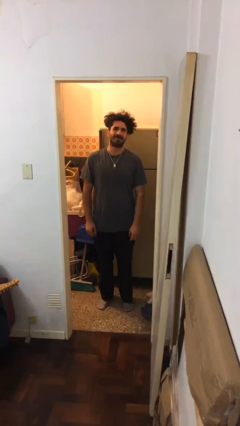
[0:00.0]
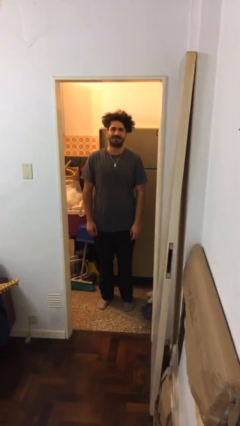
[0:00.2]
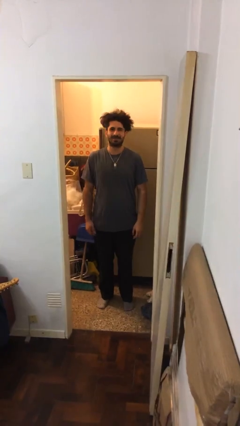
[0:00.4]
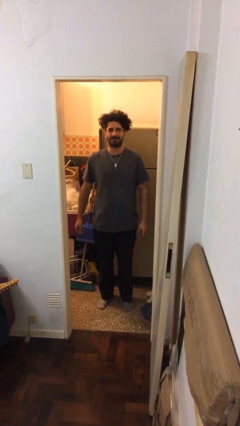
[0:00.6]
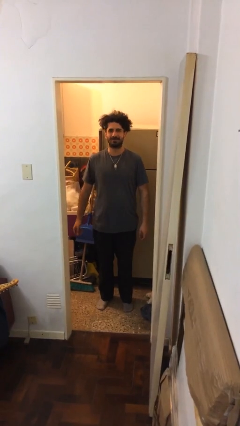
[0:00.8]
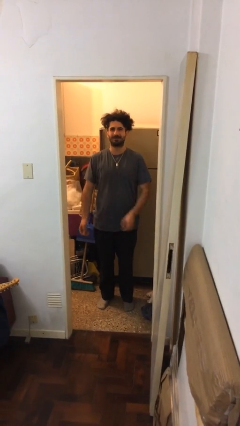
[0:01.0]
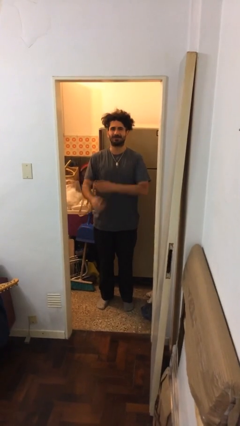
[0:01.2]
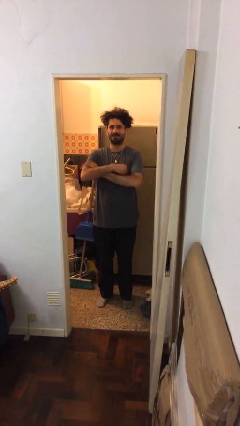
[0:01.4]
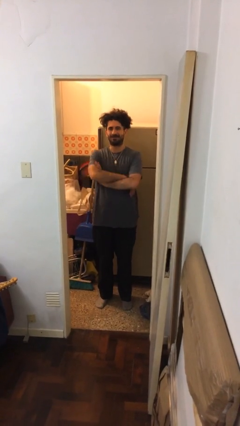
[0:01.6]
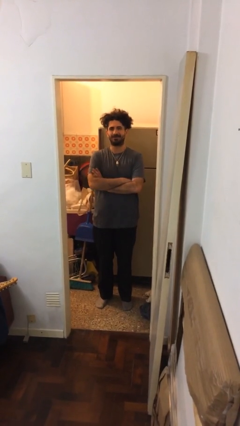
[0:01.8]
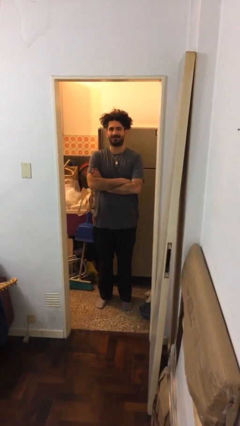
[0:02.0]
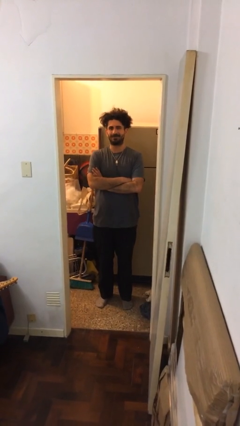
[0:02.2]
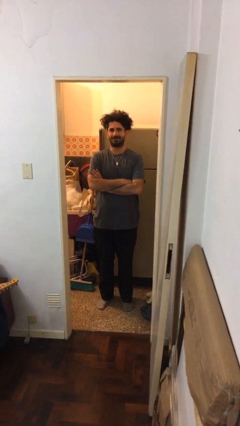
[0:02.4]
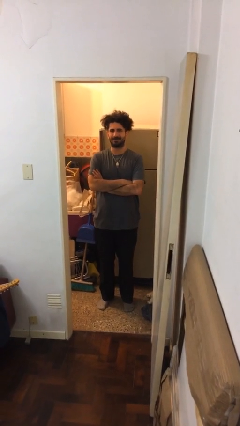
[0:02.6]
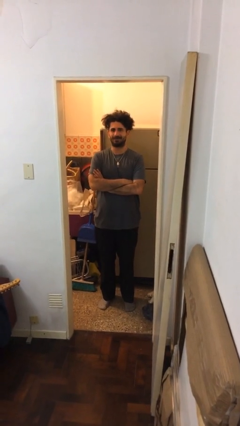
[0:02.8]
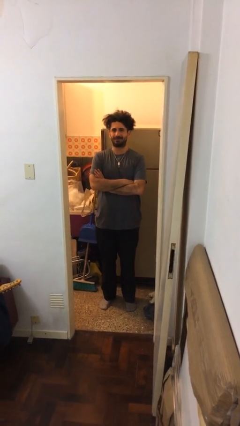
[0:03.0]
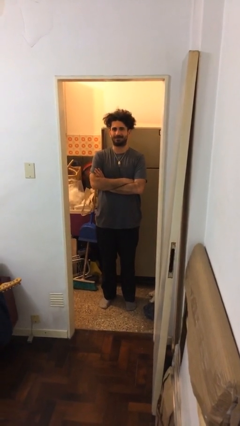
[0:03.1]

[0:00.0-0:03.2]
person crosses arms

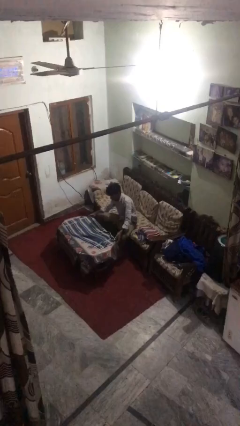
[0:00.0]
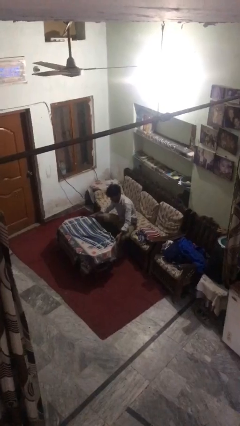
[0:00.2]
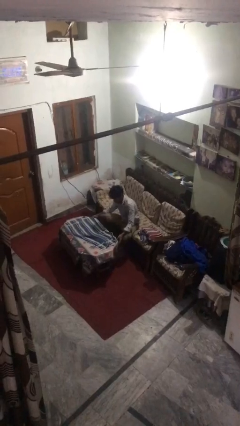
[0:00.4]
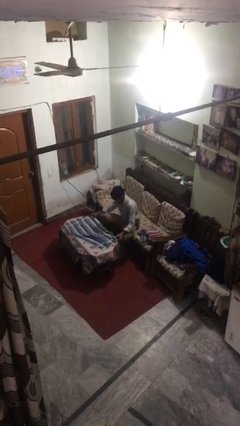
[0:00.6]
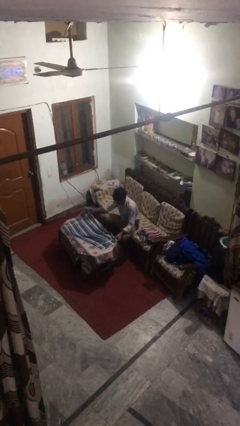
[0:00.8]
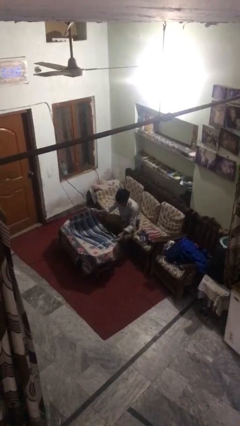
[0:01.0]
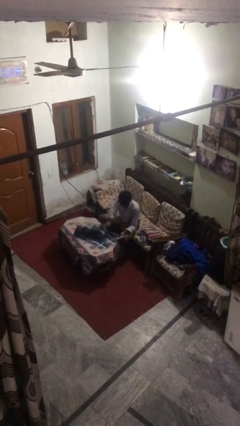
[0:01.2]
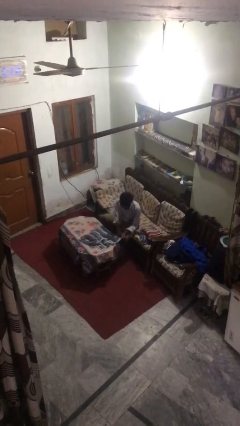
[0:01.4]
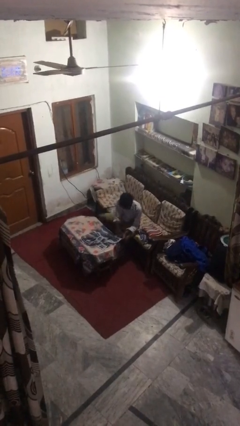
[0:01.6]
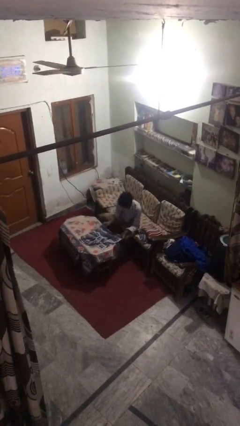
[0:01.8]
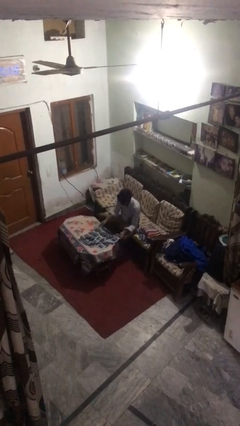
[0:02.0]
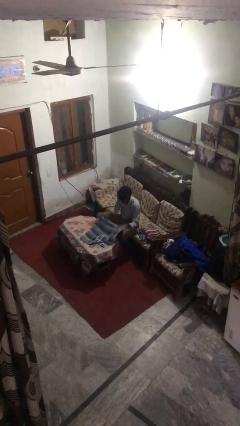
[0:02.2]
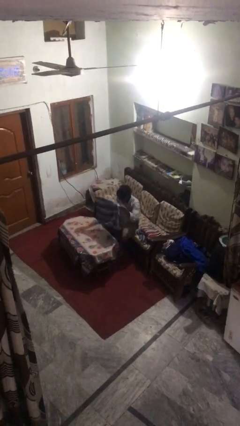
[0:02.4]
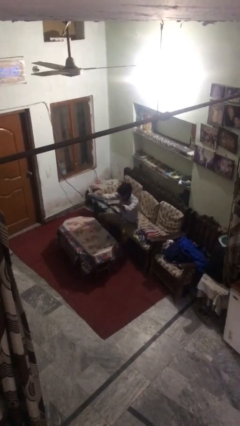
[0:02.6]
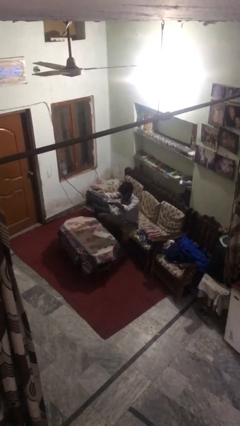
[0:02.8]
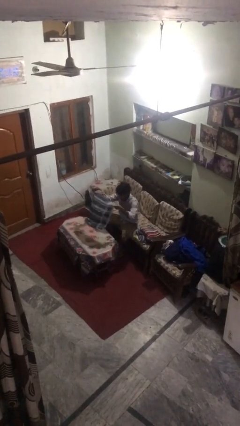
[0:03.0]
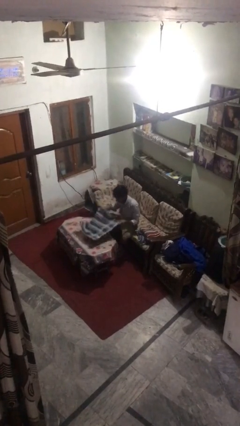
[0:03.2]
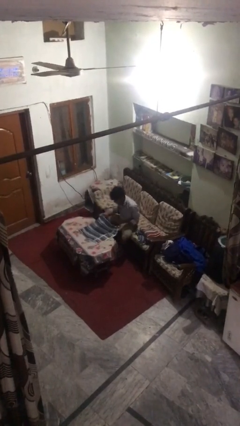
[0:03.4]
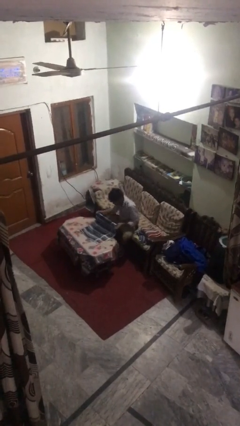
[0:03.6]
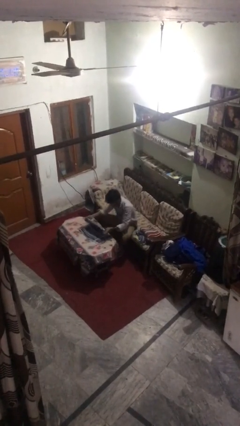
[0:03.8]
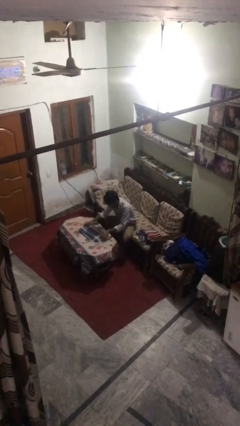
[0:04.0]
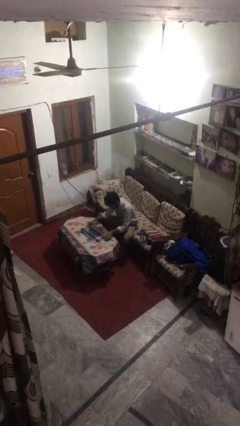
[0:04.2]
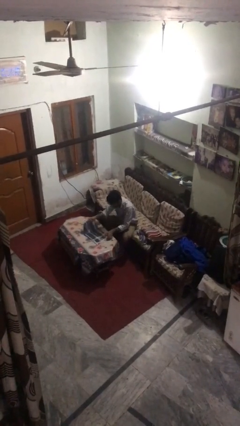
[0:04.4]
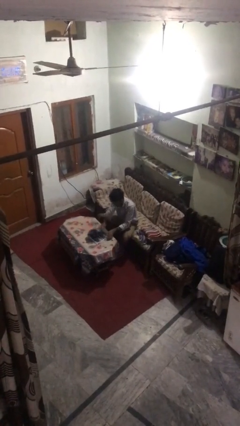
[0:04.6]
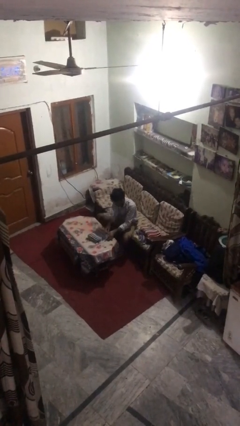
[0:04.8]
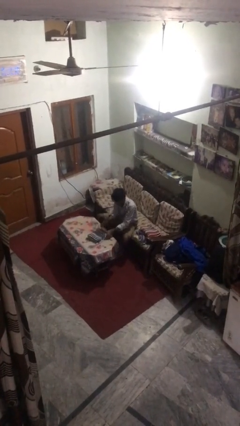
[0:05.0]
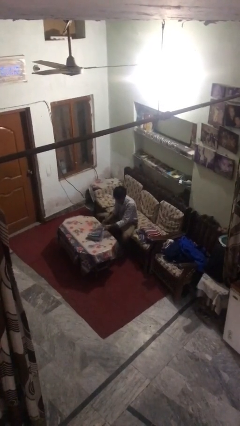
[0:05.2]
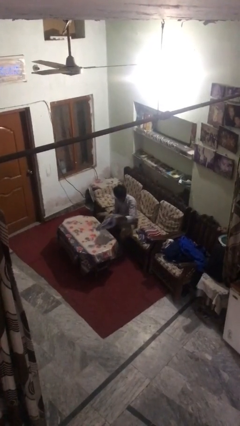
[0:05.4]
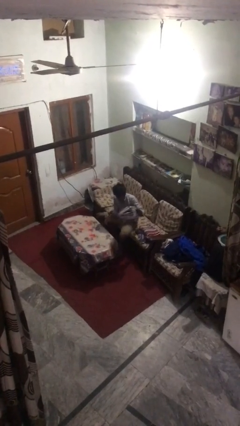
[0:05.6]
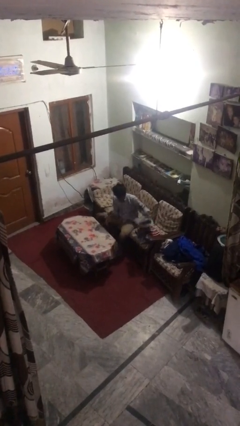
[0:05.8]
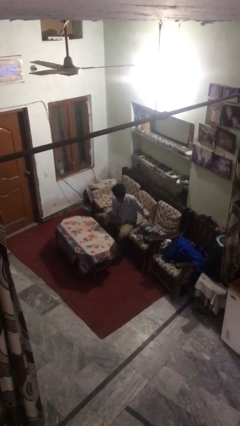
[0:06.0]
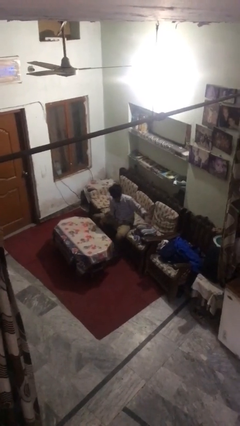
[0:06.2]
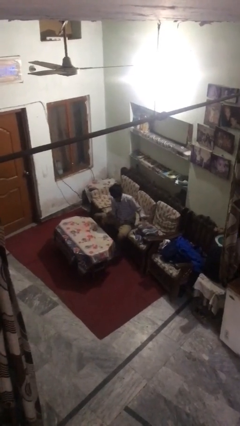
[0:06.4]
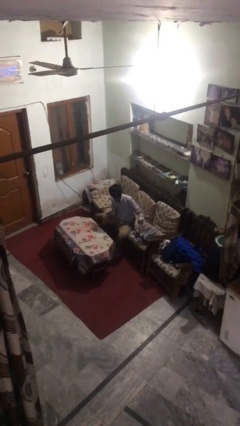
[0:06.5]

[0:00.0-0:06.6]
person folds towel

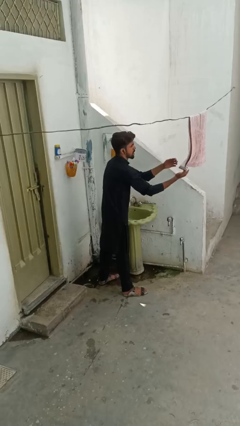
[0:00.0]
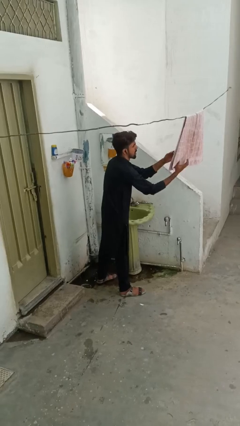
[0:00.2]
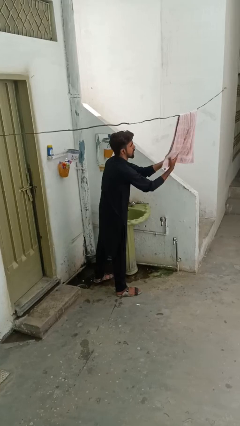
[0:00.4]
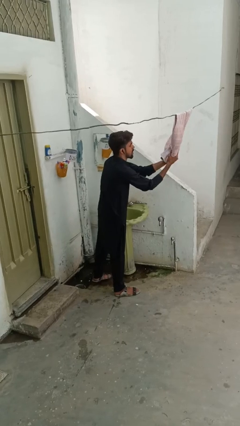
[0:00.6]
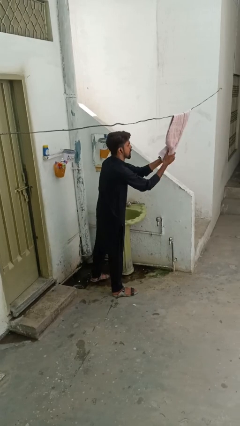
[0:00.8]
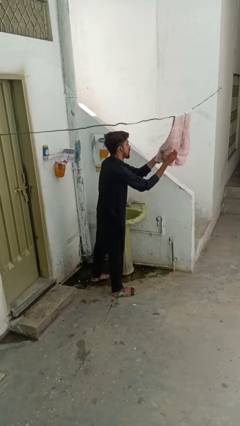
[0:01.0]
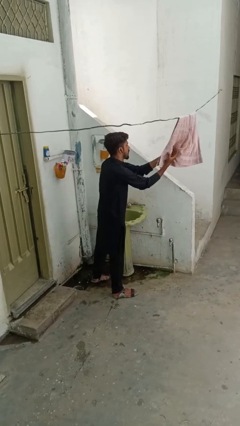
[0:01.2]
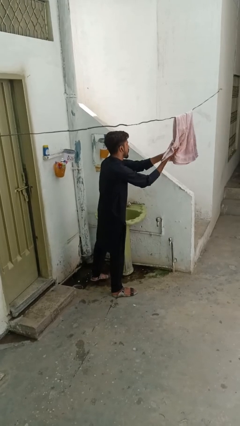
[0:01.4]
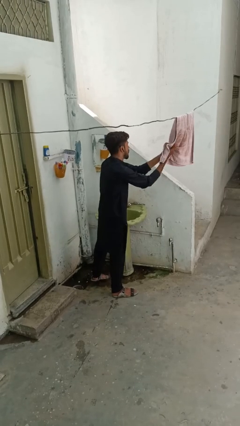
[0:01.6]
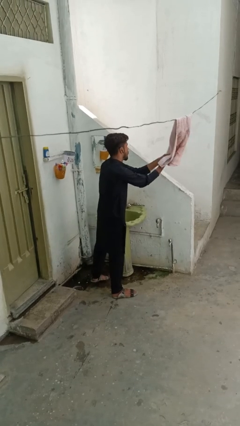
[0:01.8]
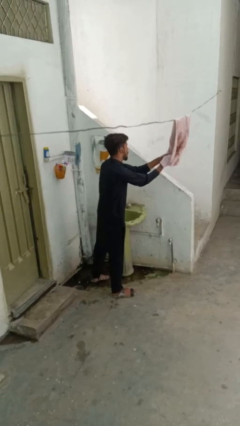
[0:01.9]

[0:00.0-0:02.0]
person dries hands with towel

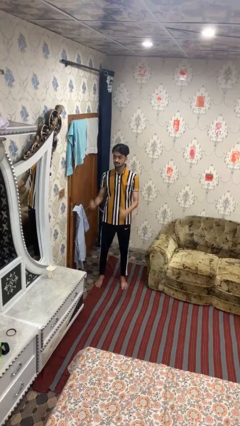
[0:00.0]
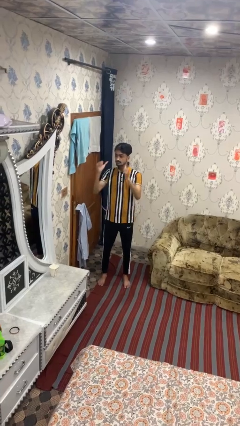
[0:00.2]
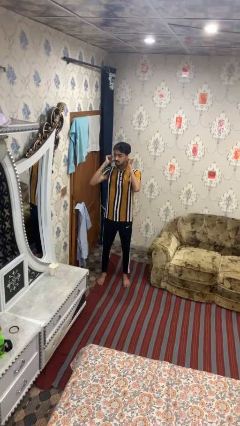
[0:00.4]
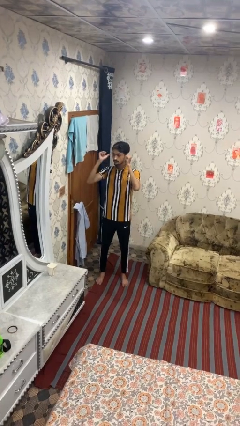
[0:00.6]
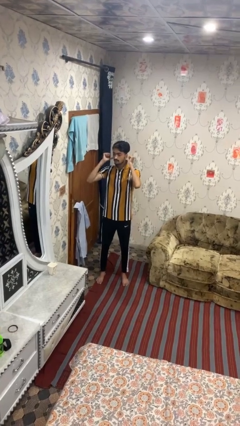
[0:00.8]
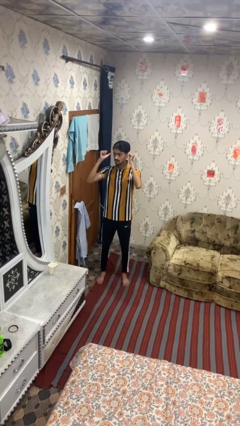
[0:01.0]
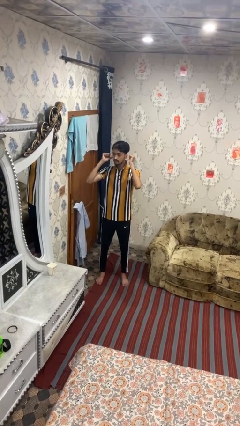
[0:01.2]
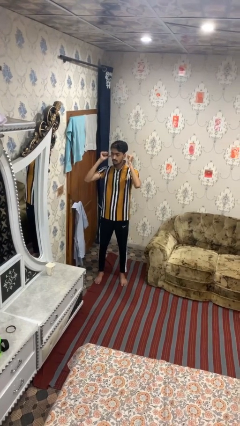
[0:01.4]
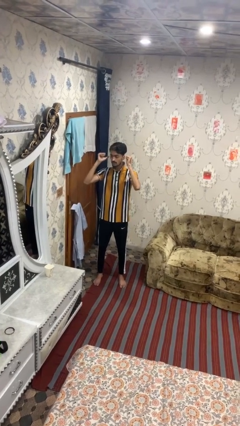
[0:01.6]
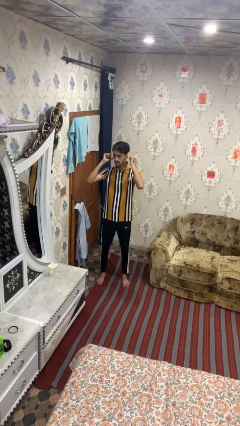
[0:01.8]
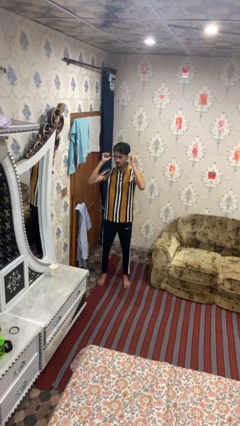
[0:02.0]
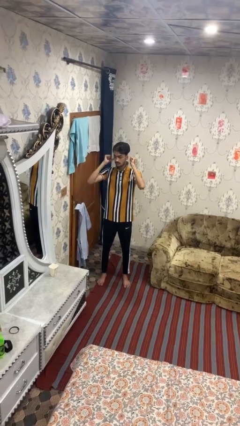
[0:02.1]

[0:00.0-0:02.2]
person gestures behind me

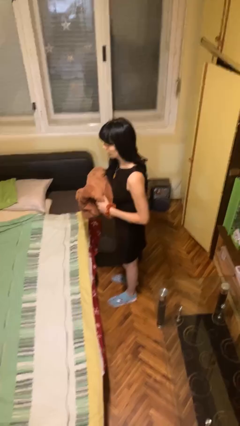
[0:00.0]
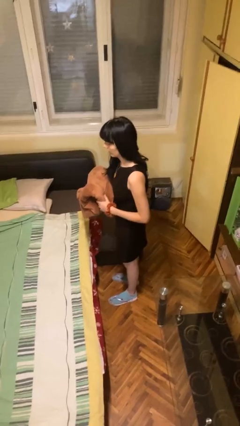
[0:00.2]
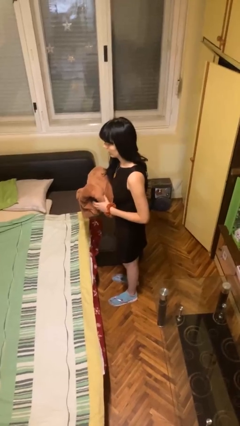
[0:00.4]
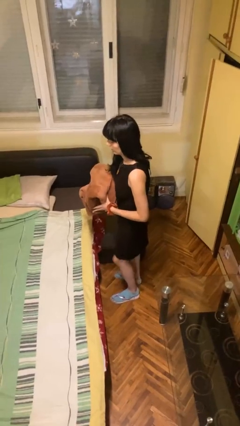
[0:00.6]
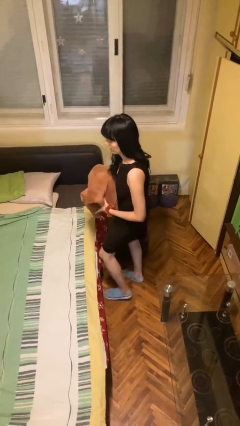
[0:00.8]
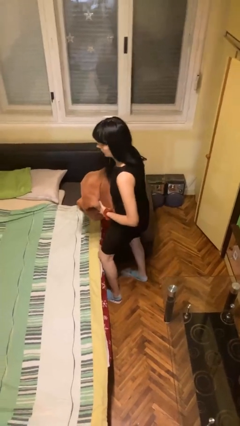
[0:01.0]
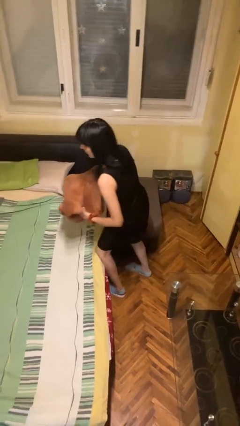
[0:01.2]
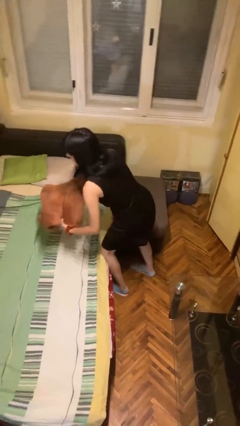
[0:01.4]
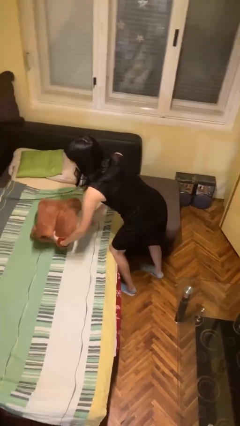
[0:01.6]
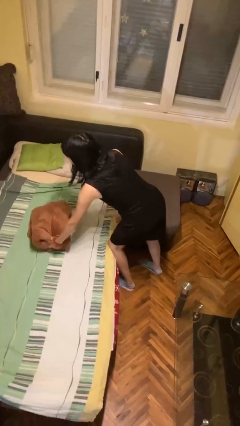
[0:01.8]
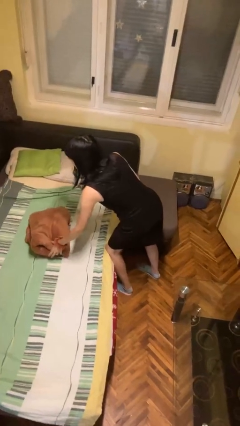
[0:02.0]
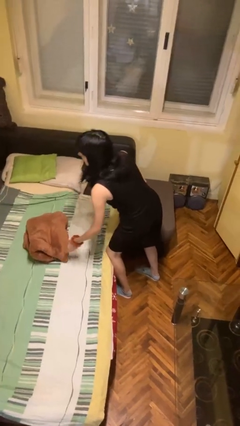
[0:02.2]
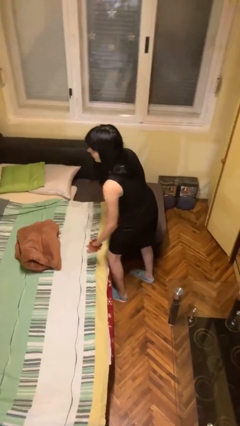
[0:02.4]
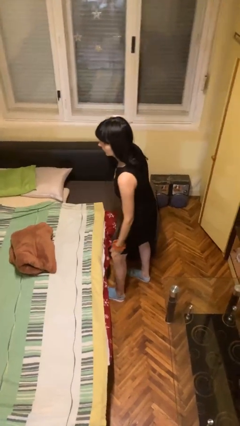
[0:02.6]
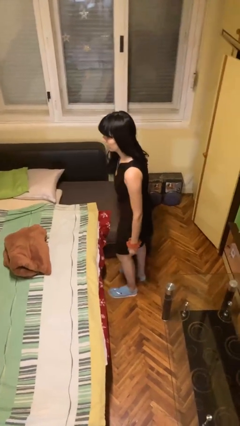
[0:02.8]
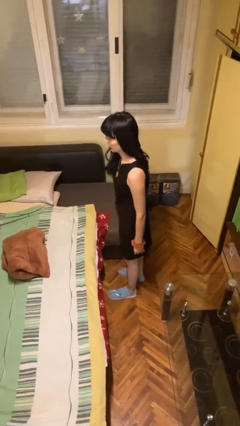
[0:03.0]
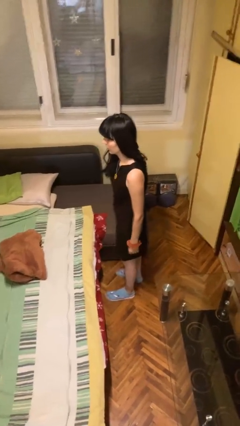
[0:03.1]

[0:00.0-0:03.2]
person puts down object on bed
